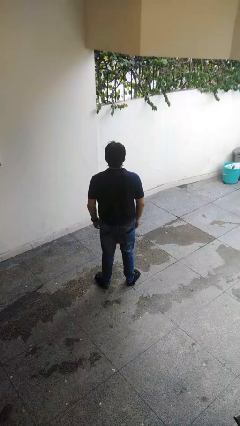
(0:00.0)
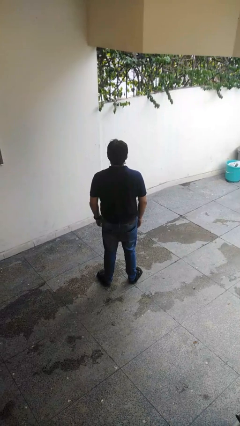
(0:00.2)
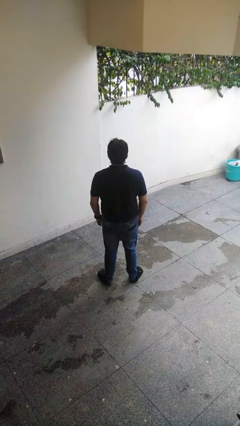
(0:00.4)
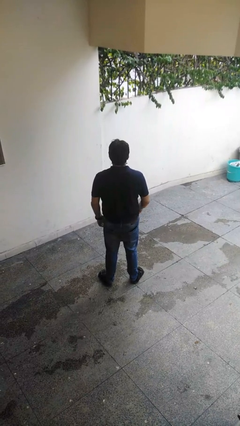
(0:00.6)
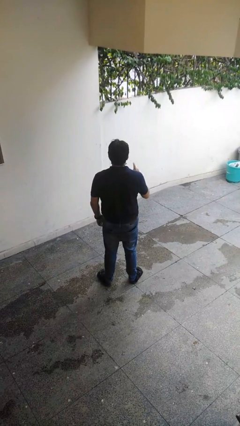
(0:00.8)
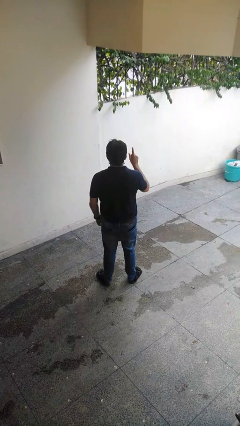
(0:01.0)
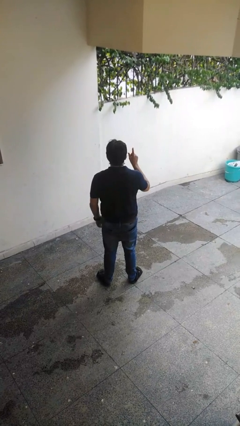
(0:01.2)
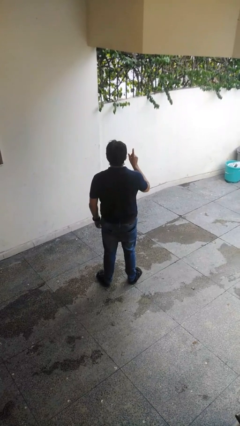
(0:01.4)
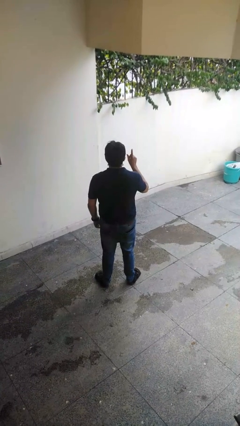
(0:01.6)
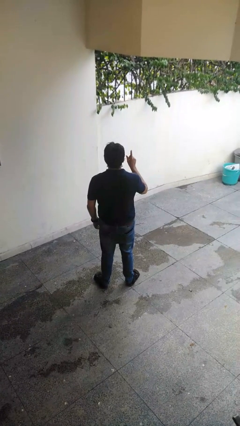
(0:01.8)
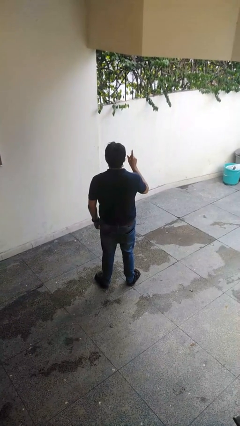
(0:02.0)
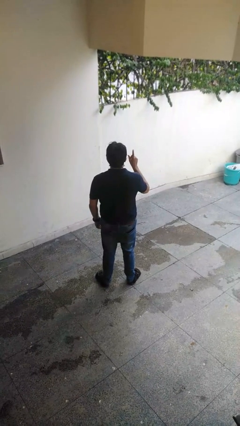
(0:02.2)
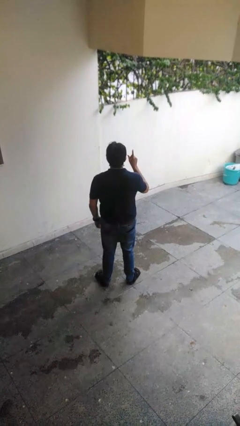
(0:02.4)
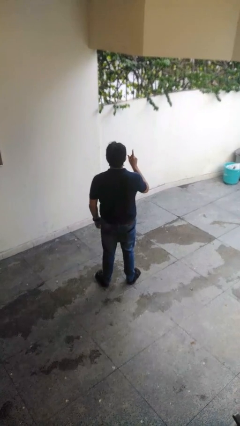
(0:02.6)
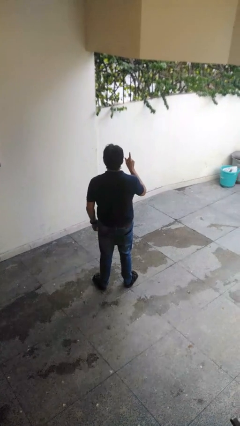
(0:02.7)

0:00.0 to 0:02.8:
person gestures number one

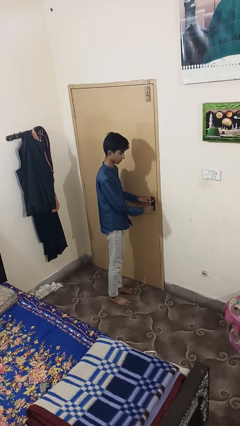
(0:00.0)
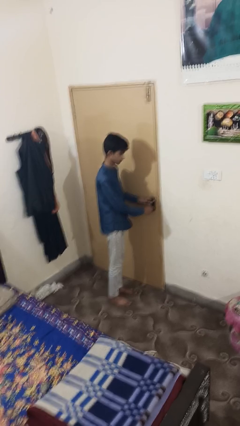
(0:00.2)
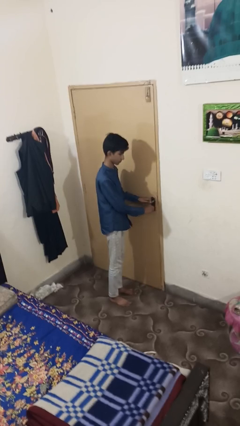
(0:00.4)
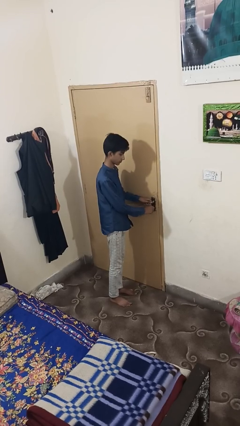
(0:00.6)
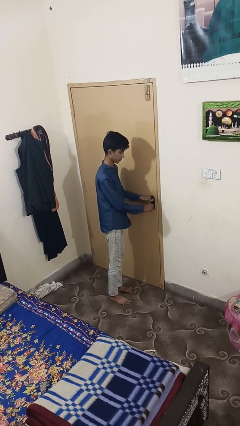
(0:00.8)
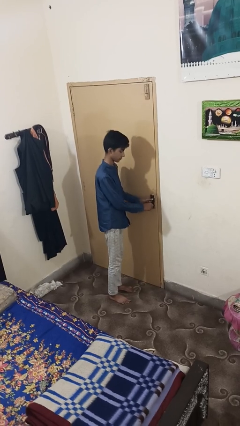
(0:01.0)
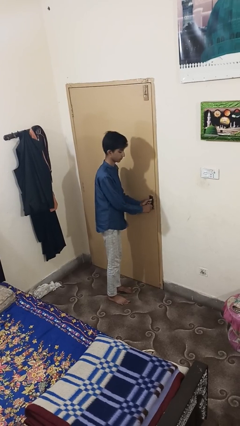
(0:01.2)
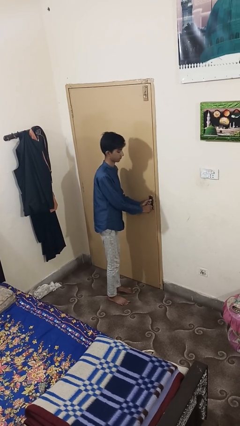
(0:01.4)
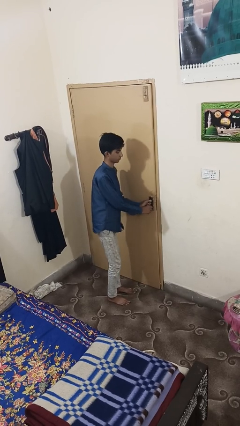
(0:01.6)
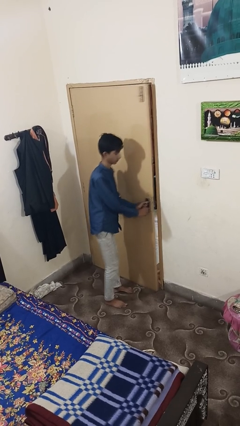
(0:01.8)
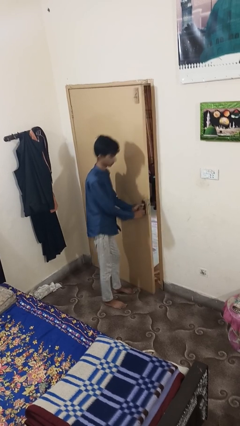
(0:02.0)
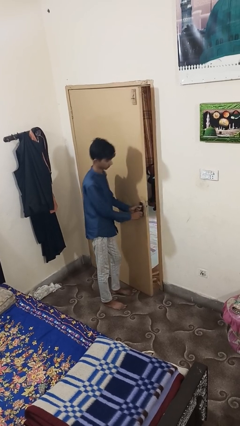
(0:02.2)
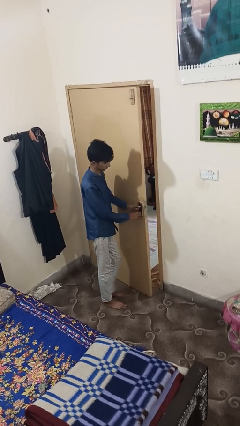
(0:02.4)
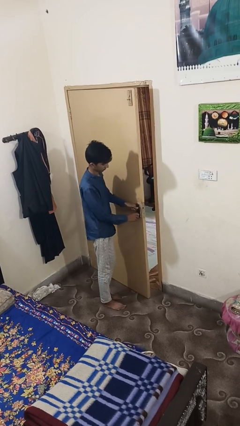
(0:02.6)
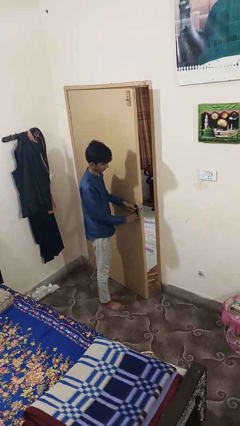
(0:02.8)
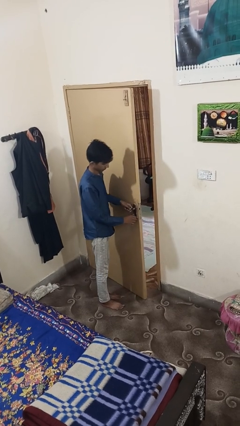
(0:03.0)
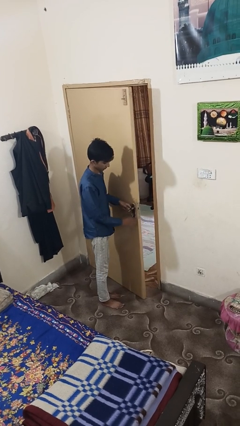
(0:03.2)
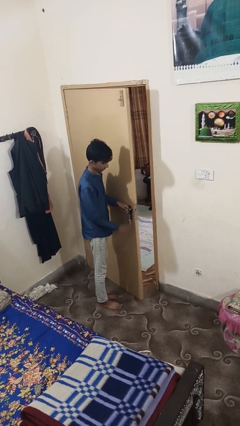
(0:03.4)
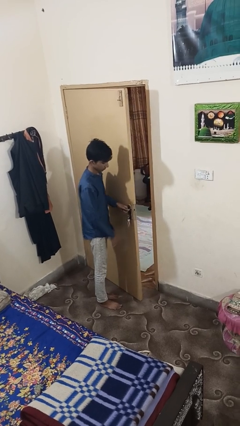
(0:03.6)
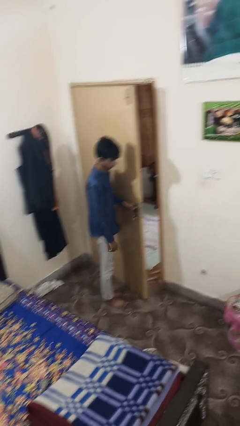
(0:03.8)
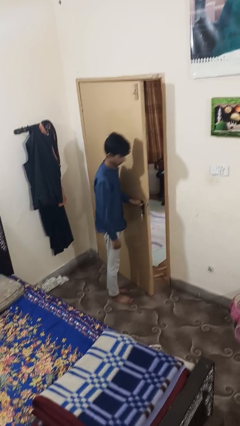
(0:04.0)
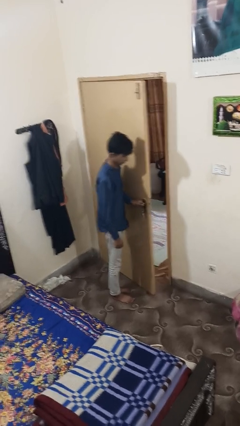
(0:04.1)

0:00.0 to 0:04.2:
person opens facility door

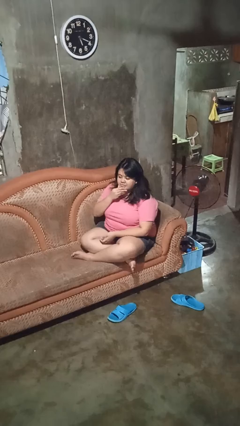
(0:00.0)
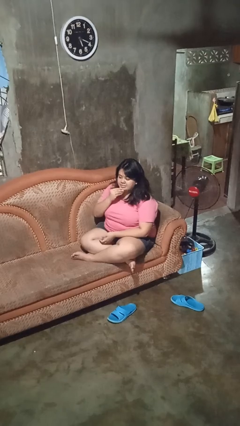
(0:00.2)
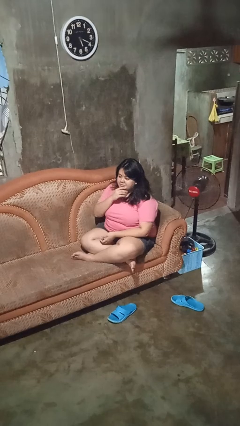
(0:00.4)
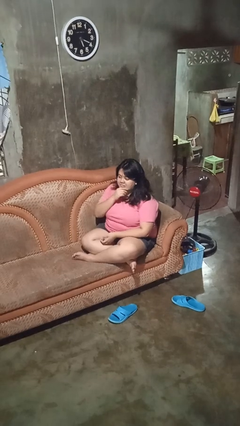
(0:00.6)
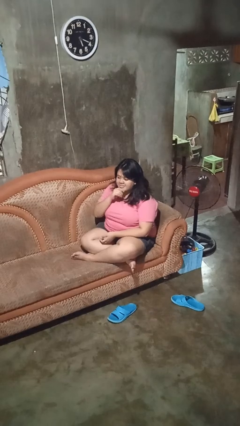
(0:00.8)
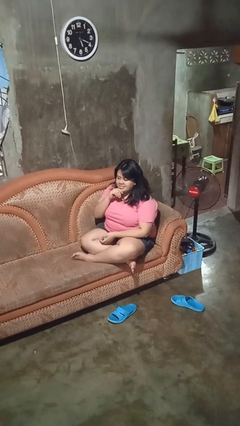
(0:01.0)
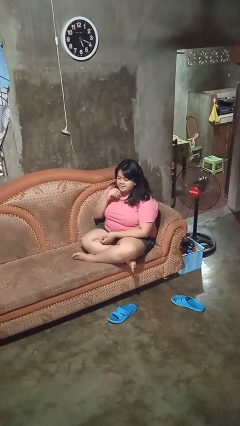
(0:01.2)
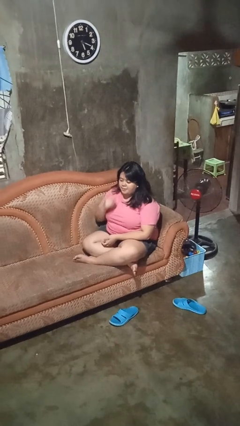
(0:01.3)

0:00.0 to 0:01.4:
person strokes chin

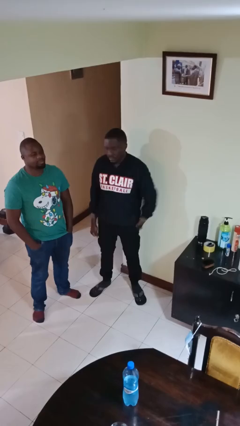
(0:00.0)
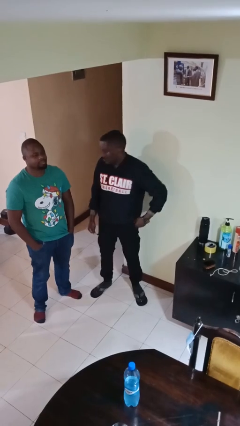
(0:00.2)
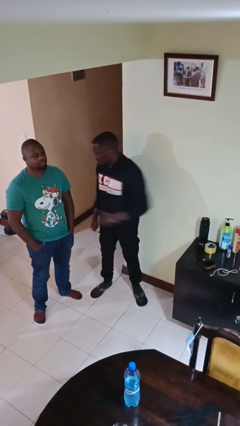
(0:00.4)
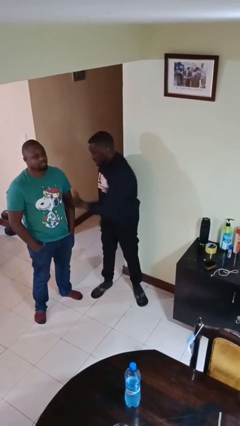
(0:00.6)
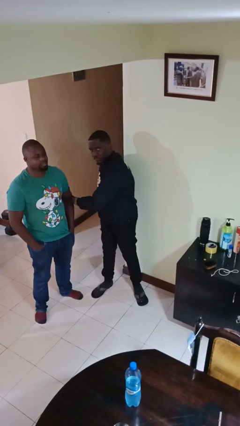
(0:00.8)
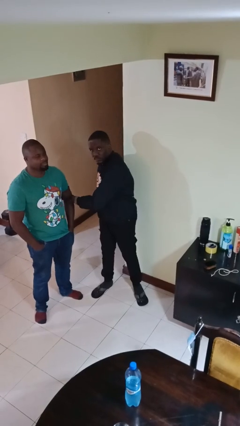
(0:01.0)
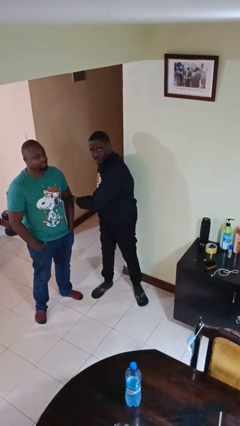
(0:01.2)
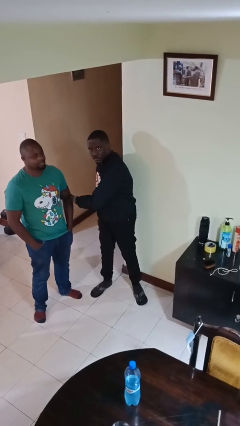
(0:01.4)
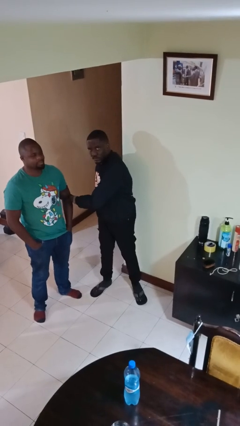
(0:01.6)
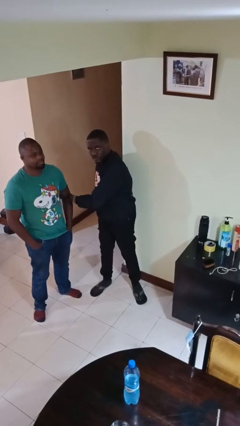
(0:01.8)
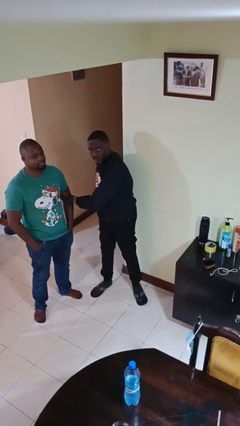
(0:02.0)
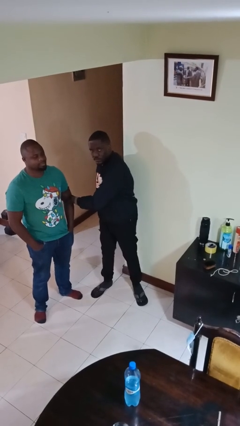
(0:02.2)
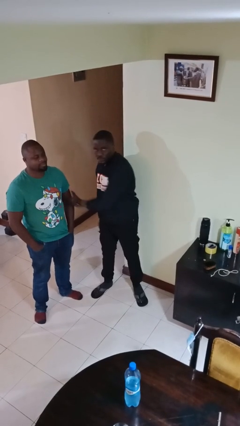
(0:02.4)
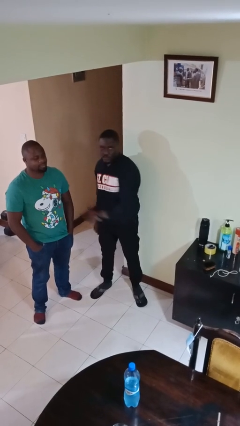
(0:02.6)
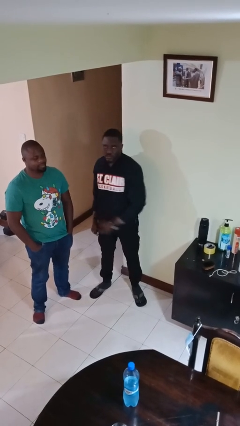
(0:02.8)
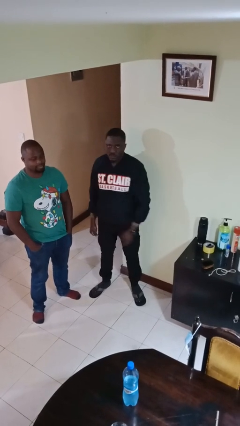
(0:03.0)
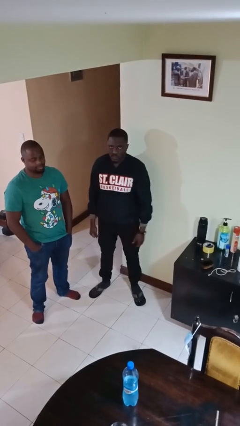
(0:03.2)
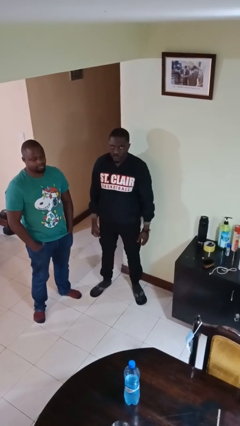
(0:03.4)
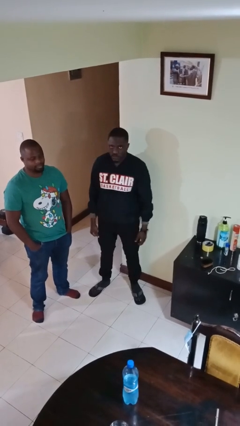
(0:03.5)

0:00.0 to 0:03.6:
person grabs person by bicep

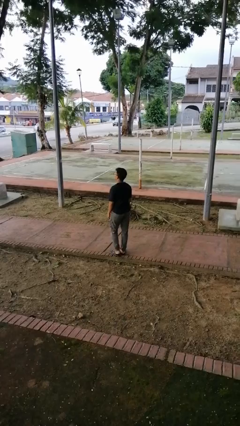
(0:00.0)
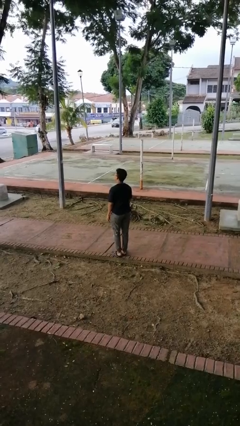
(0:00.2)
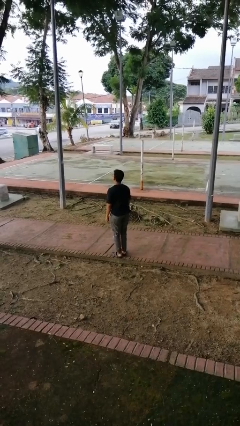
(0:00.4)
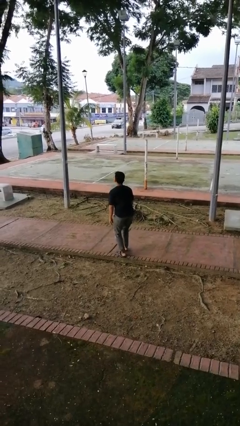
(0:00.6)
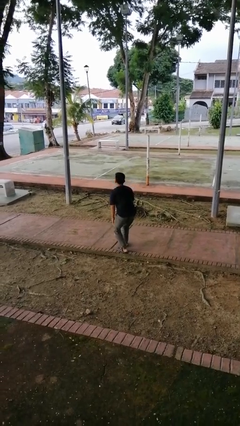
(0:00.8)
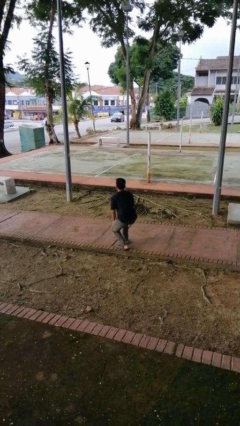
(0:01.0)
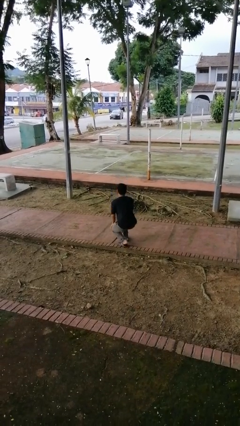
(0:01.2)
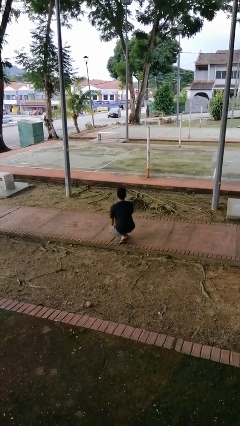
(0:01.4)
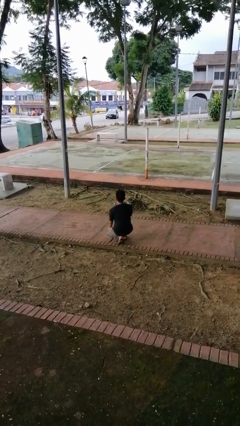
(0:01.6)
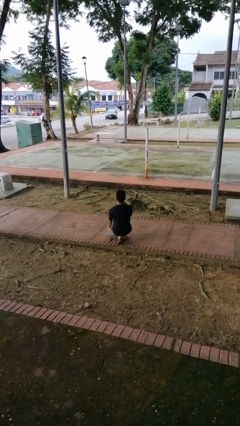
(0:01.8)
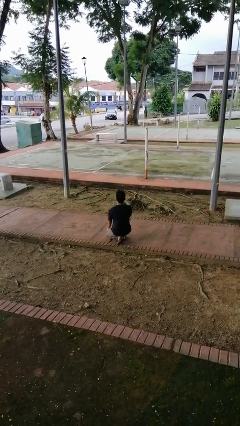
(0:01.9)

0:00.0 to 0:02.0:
person kneels

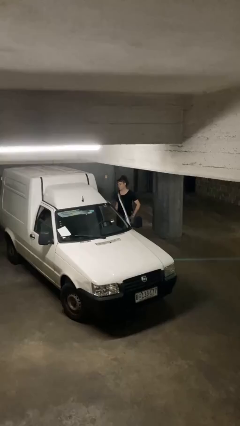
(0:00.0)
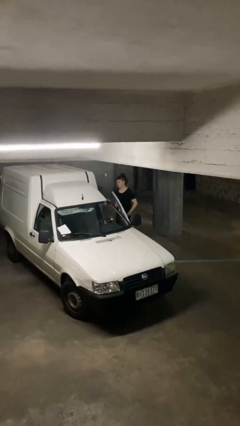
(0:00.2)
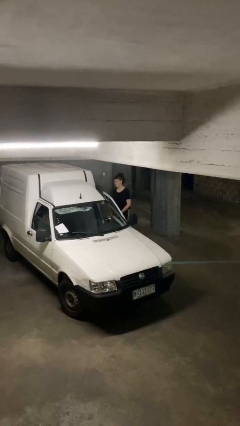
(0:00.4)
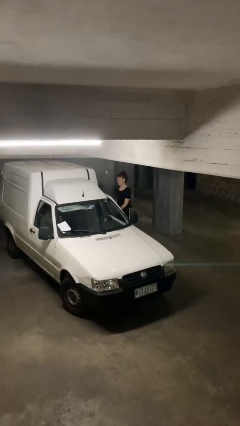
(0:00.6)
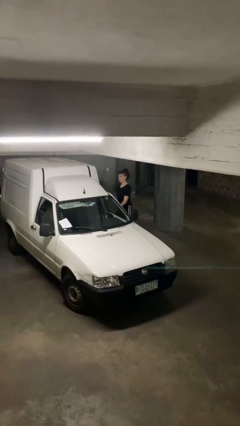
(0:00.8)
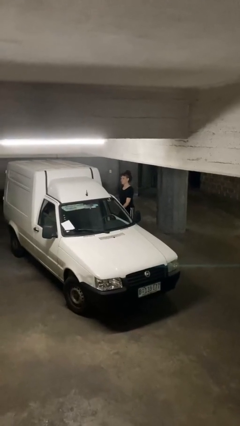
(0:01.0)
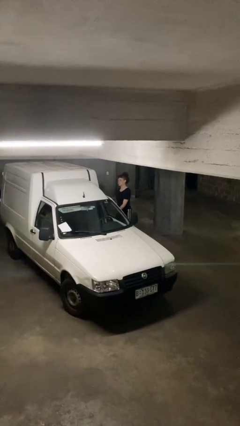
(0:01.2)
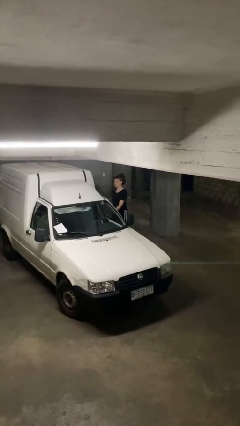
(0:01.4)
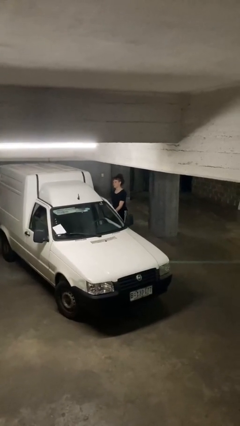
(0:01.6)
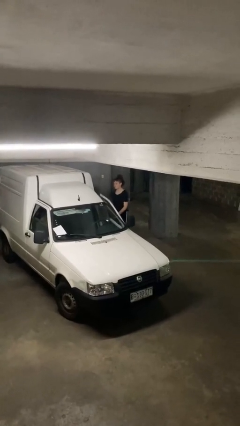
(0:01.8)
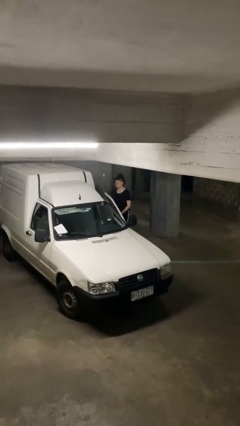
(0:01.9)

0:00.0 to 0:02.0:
person closes car door

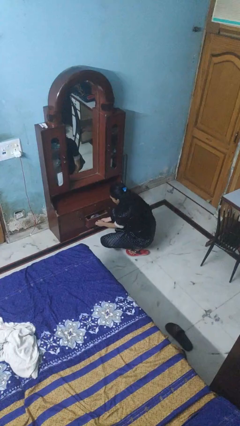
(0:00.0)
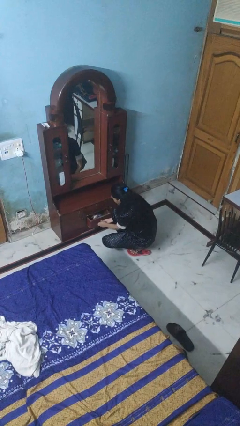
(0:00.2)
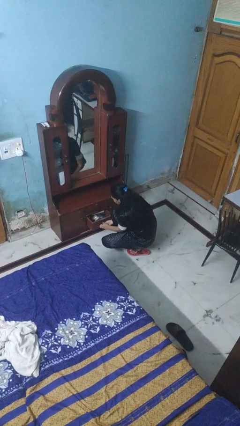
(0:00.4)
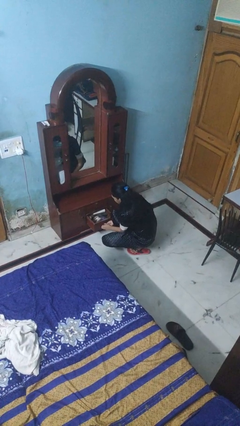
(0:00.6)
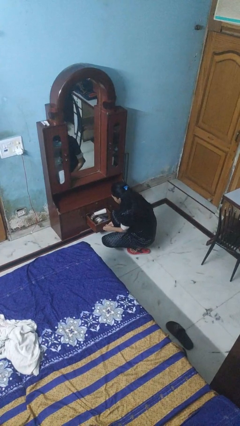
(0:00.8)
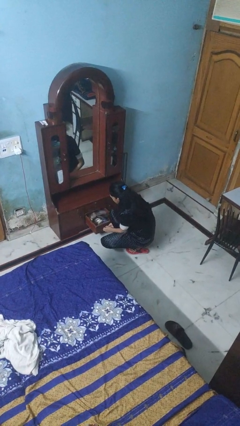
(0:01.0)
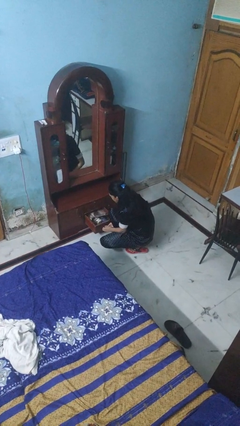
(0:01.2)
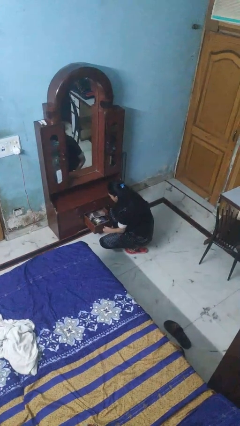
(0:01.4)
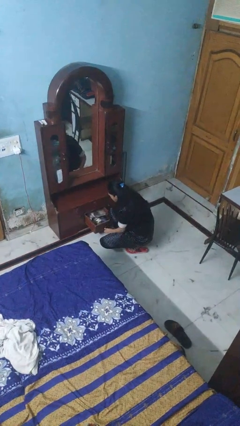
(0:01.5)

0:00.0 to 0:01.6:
person opens dresser drawer
